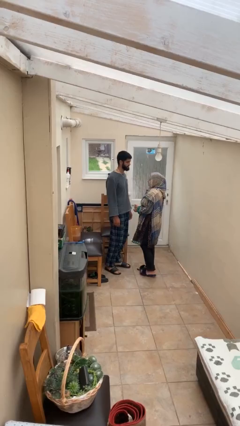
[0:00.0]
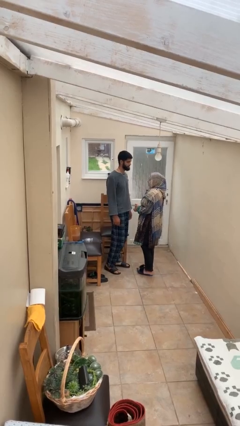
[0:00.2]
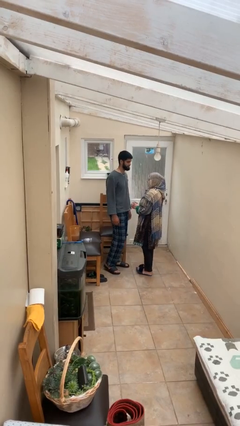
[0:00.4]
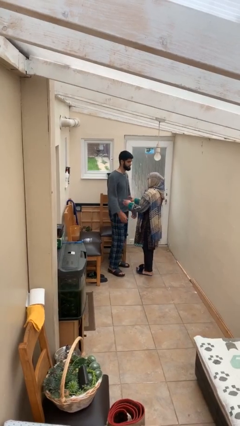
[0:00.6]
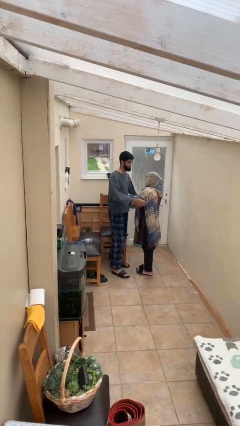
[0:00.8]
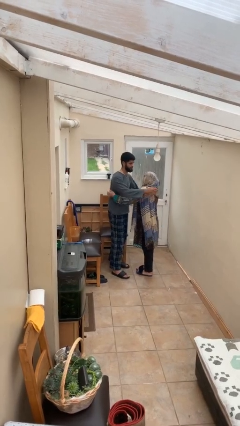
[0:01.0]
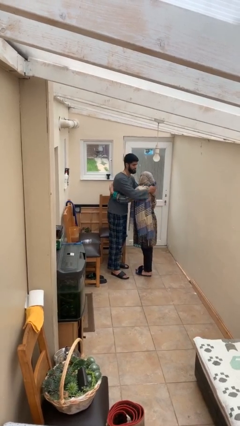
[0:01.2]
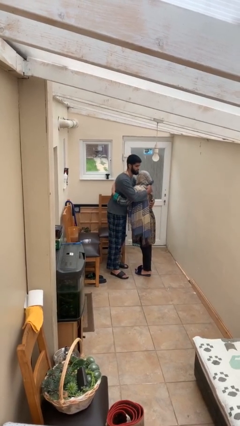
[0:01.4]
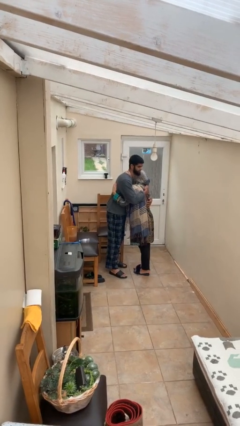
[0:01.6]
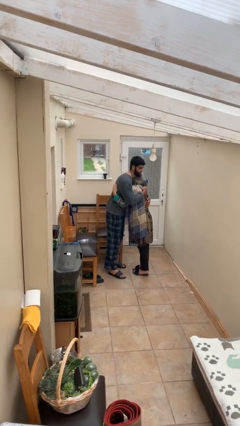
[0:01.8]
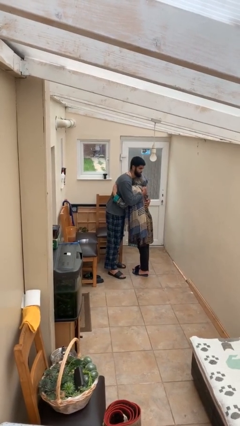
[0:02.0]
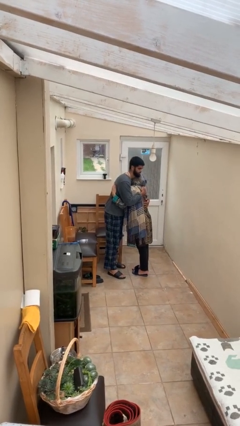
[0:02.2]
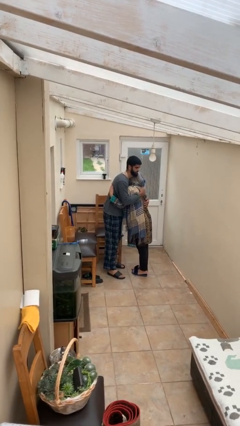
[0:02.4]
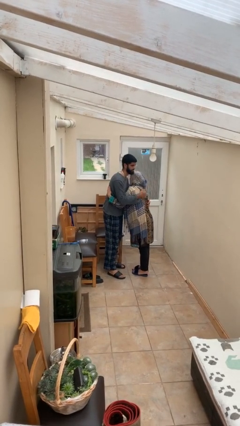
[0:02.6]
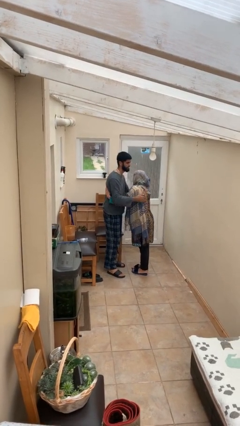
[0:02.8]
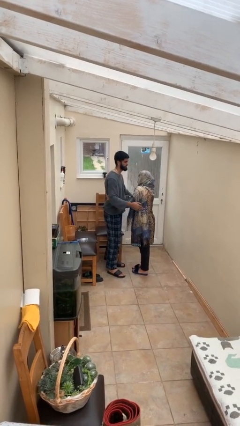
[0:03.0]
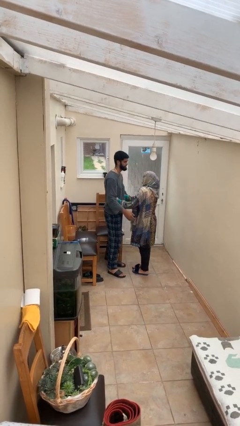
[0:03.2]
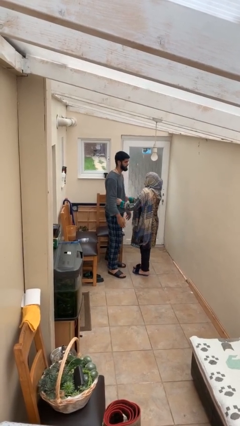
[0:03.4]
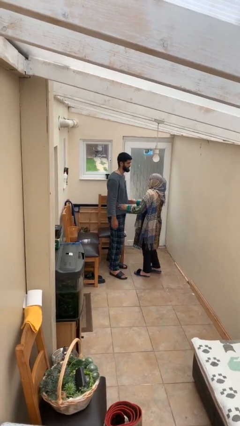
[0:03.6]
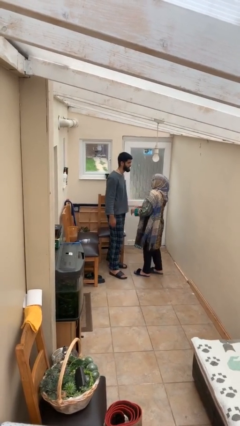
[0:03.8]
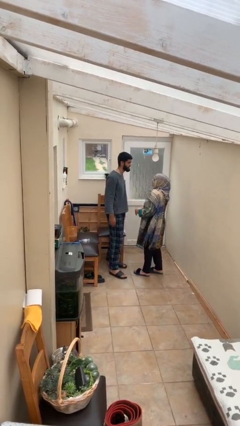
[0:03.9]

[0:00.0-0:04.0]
person embraces person

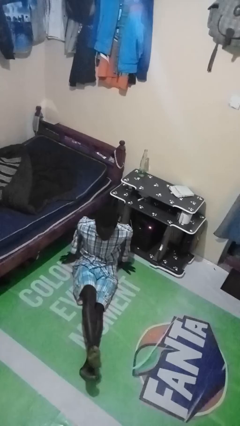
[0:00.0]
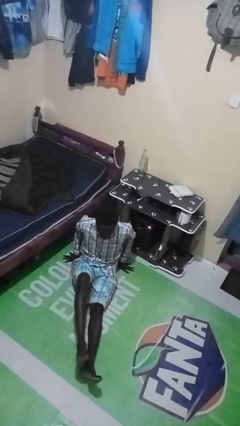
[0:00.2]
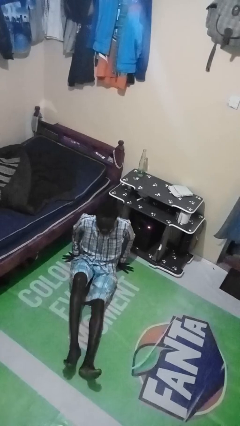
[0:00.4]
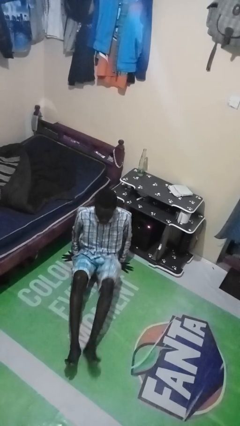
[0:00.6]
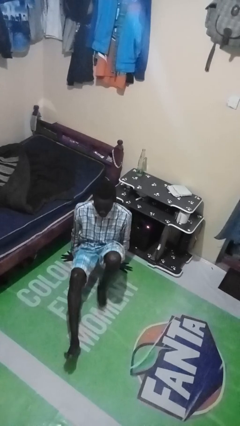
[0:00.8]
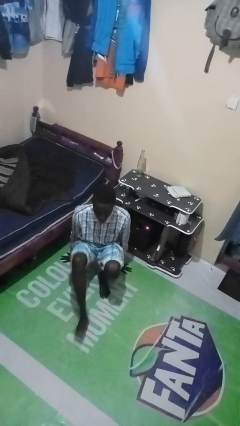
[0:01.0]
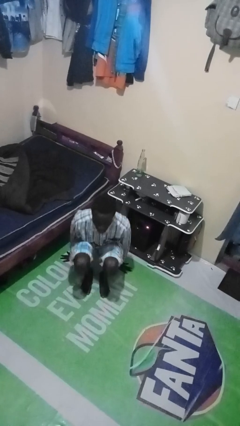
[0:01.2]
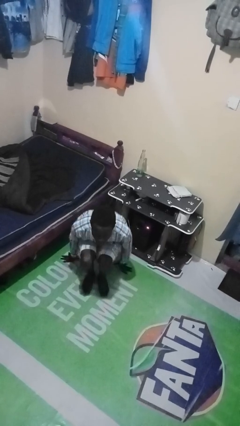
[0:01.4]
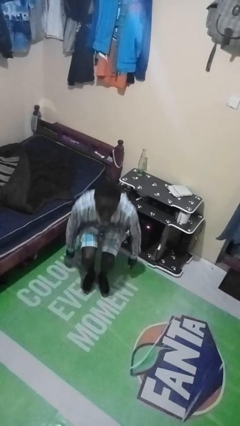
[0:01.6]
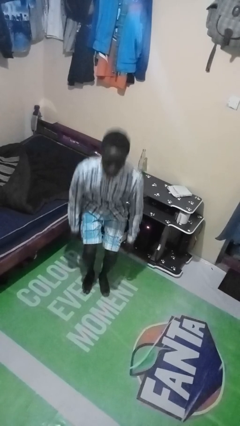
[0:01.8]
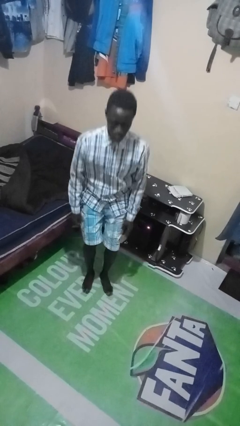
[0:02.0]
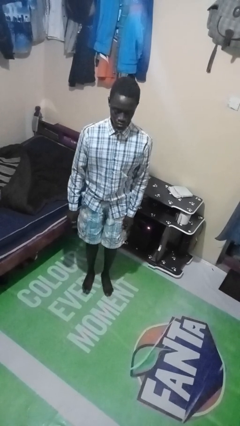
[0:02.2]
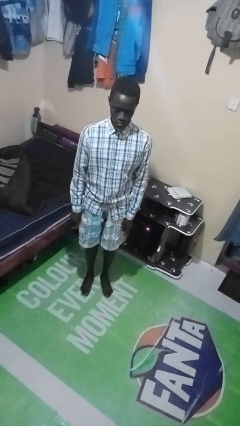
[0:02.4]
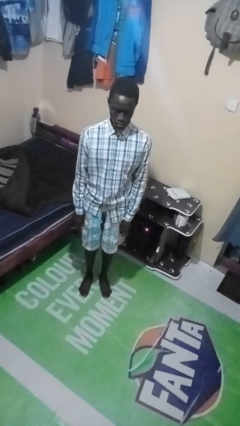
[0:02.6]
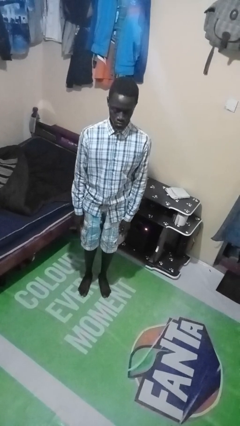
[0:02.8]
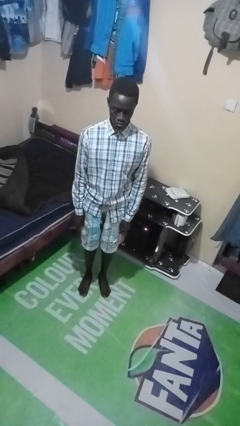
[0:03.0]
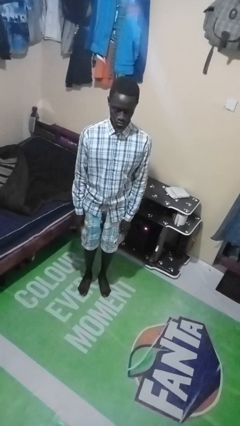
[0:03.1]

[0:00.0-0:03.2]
person stands up from floor

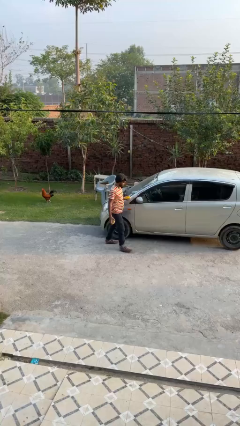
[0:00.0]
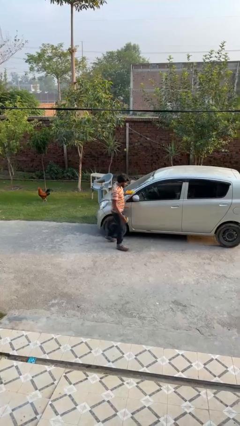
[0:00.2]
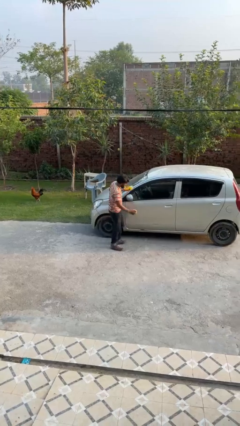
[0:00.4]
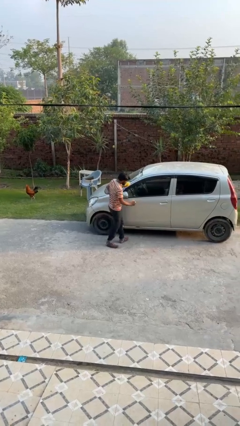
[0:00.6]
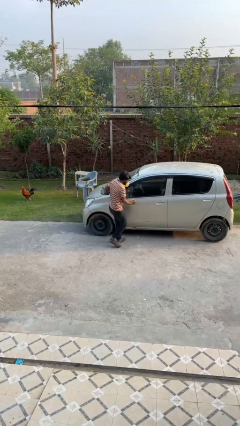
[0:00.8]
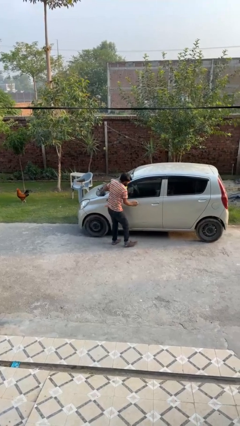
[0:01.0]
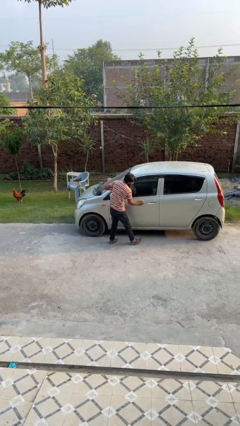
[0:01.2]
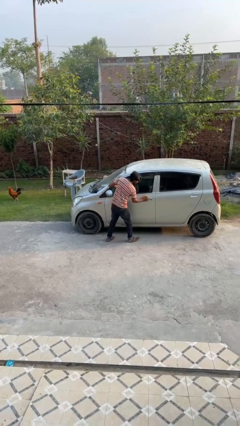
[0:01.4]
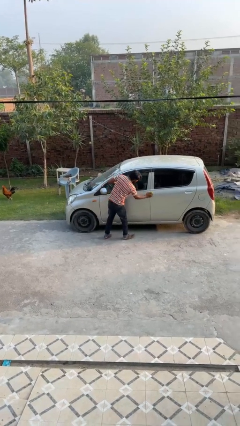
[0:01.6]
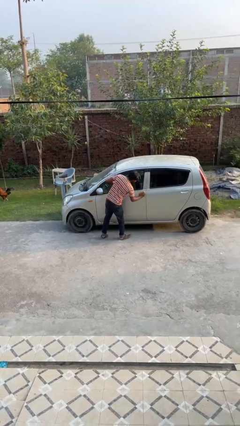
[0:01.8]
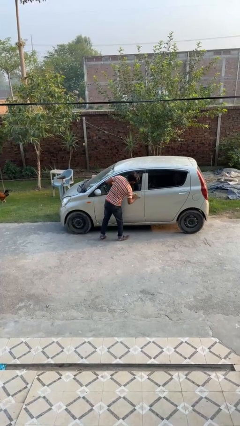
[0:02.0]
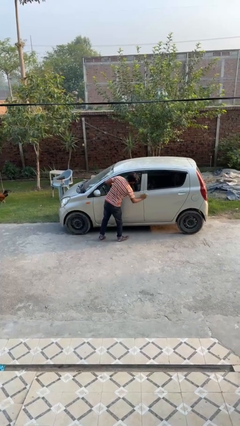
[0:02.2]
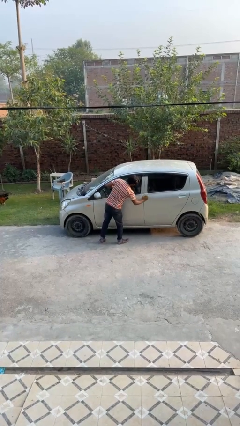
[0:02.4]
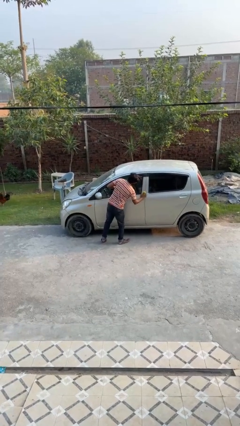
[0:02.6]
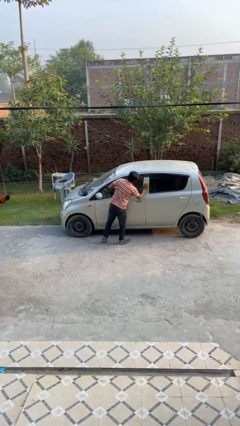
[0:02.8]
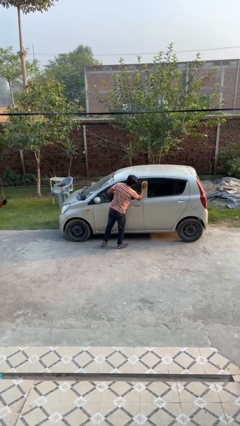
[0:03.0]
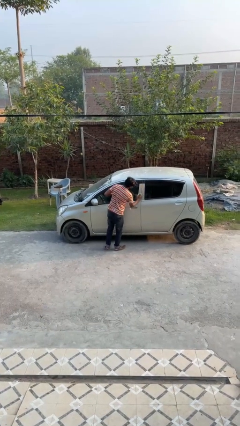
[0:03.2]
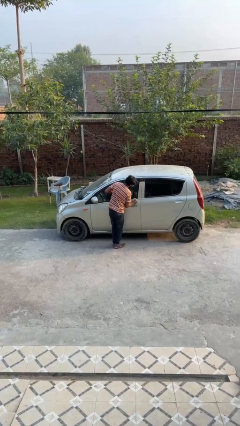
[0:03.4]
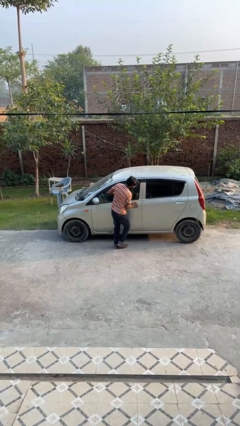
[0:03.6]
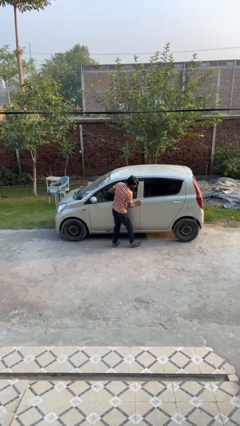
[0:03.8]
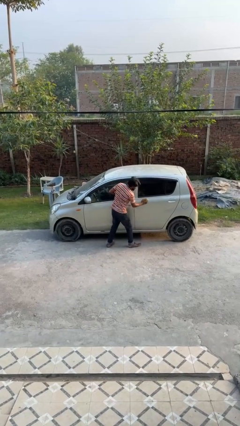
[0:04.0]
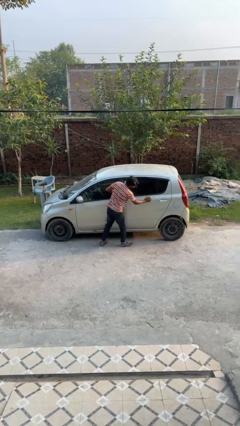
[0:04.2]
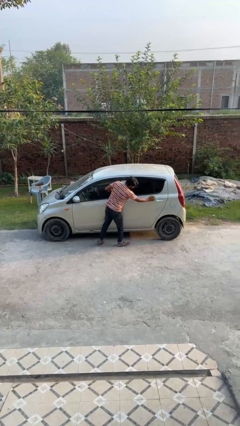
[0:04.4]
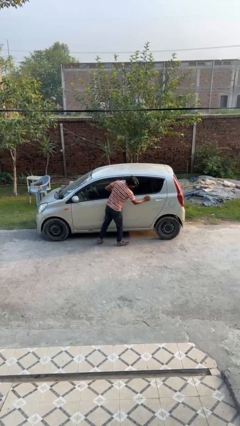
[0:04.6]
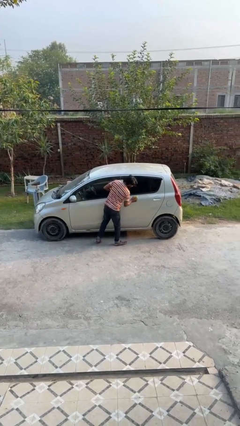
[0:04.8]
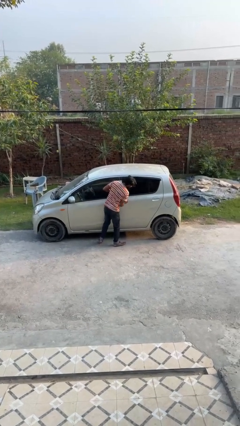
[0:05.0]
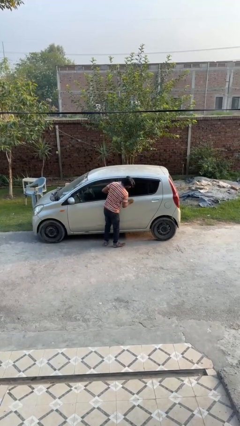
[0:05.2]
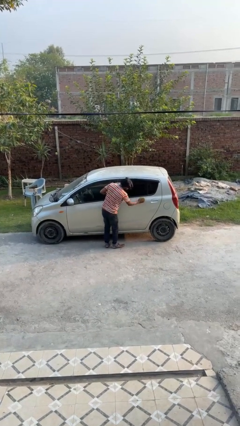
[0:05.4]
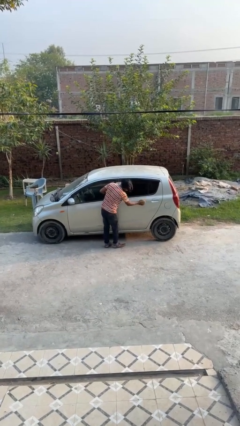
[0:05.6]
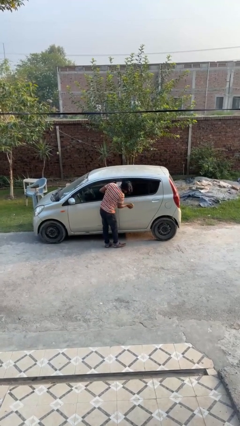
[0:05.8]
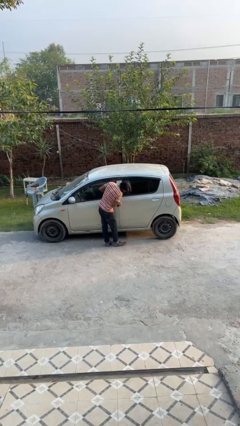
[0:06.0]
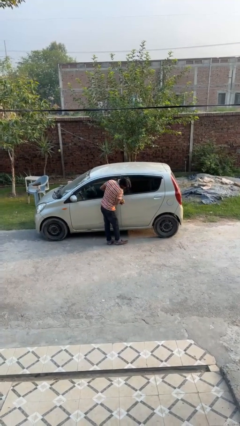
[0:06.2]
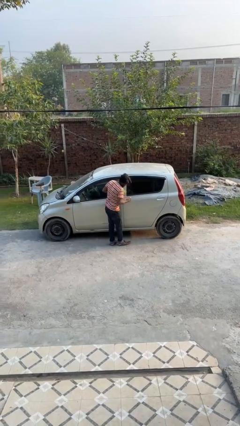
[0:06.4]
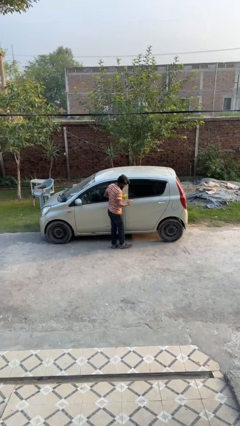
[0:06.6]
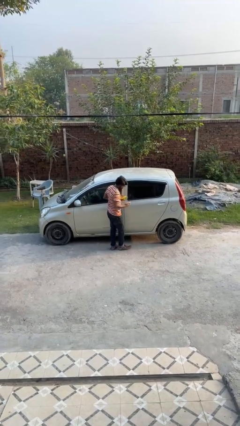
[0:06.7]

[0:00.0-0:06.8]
person polishes car with rag

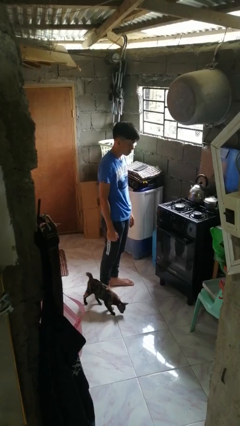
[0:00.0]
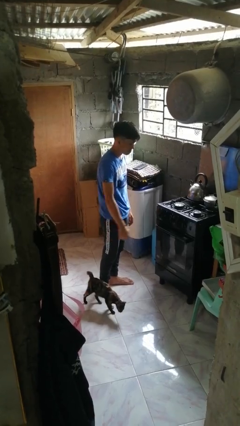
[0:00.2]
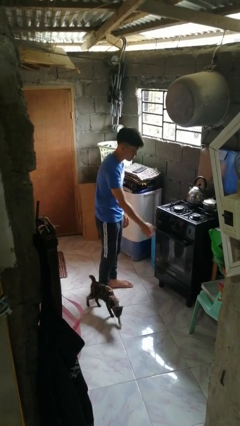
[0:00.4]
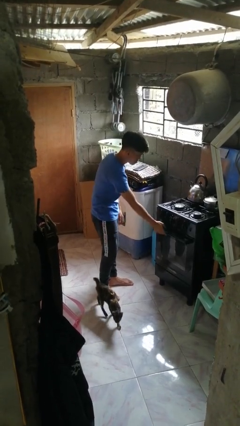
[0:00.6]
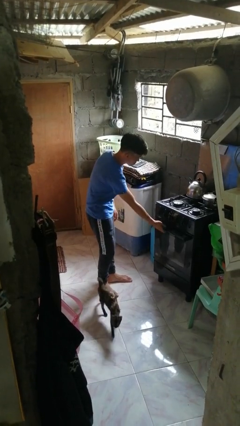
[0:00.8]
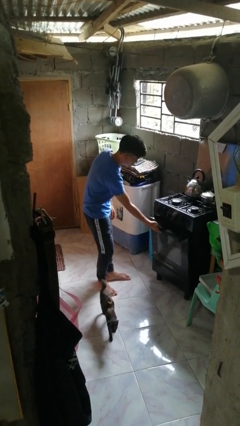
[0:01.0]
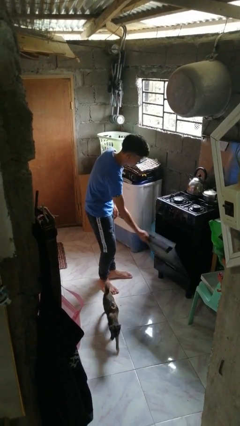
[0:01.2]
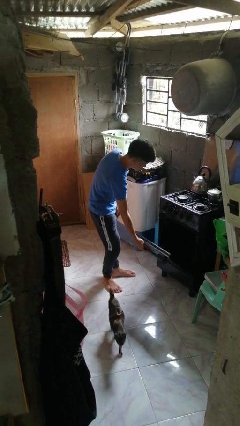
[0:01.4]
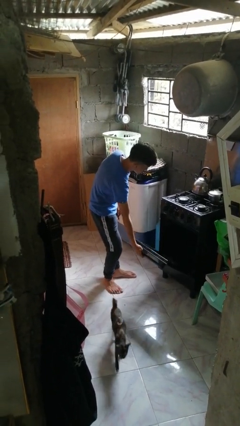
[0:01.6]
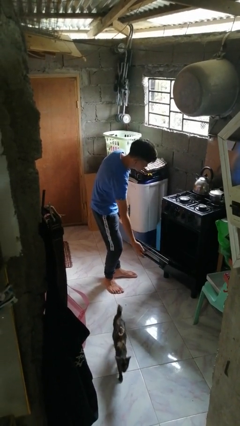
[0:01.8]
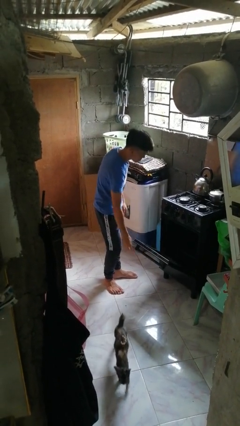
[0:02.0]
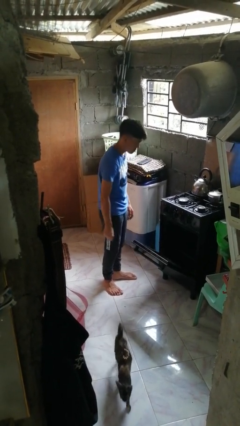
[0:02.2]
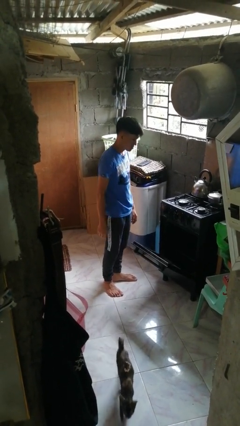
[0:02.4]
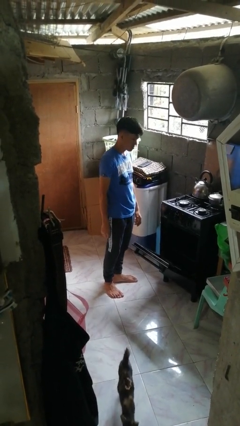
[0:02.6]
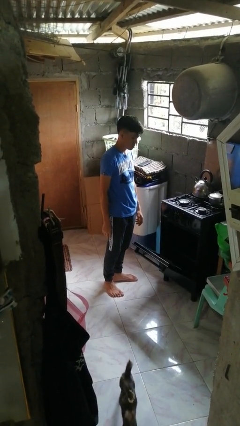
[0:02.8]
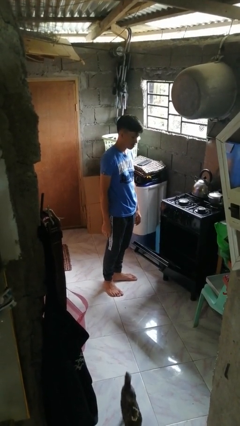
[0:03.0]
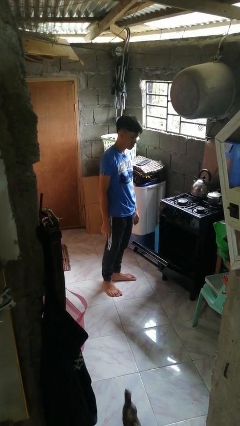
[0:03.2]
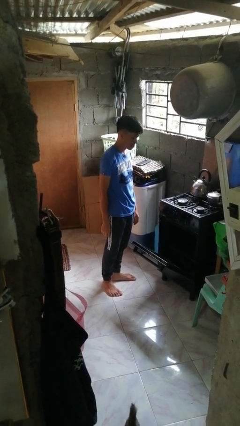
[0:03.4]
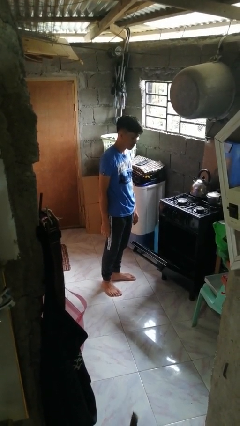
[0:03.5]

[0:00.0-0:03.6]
person opens oven door
